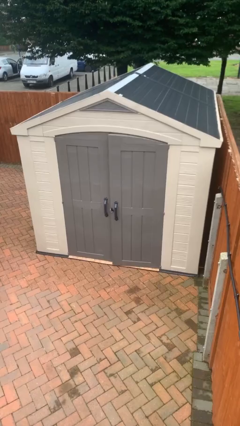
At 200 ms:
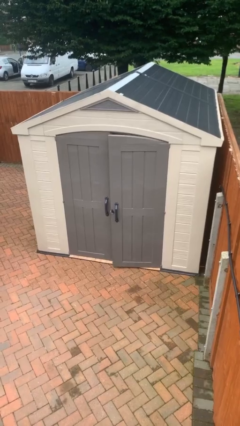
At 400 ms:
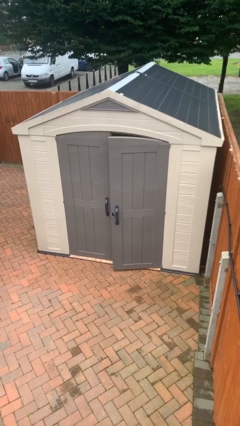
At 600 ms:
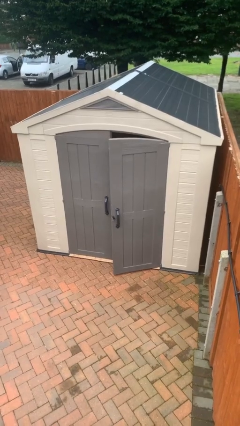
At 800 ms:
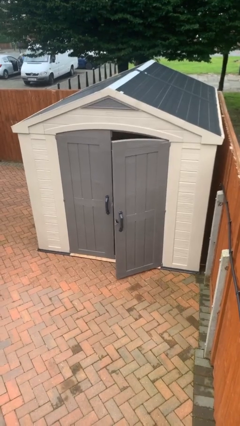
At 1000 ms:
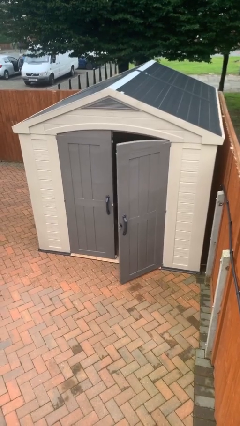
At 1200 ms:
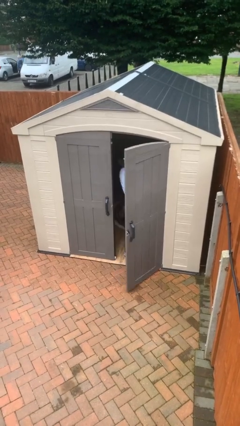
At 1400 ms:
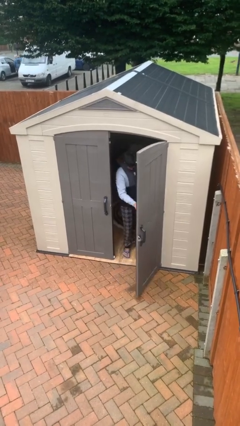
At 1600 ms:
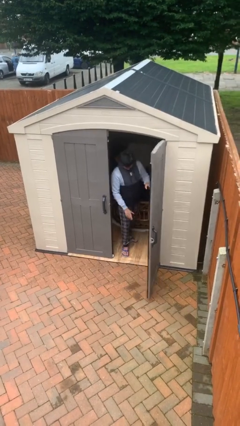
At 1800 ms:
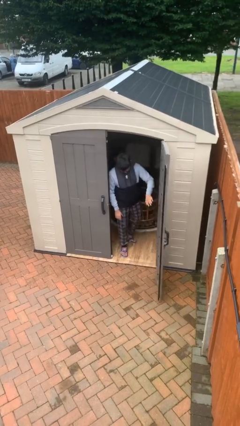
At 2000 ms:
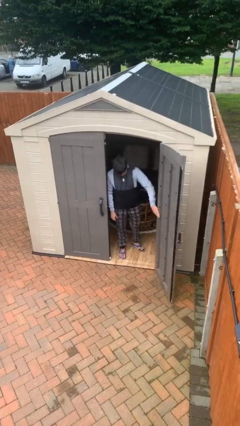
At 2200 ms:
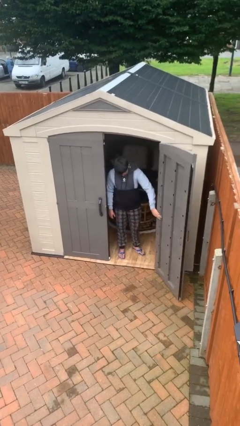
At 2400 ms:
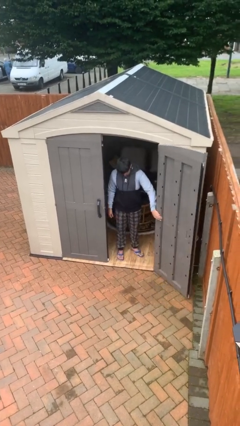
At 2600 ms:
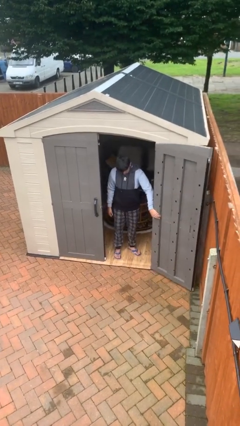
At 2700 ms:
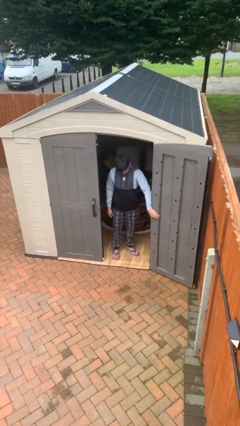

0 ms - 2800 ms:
person opens facility door

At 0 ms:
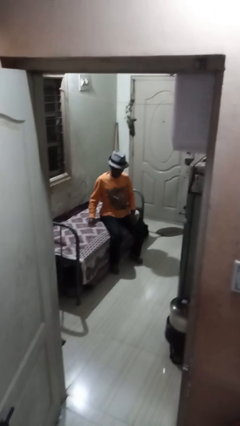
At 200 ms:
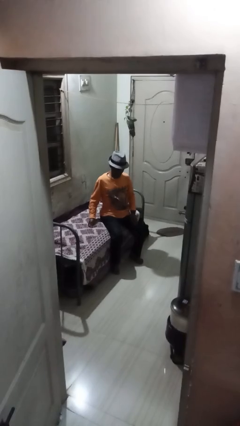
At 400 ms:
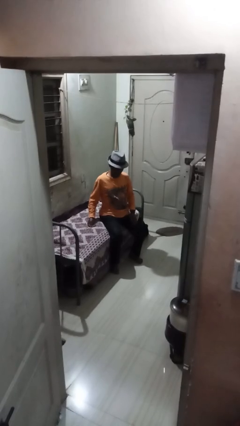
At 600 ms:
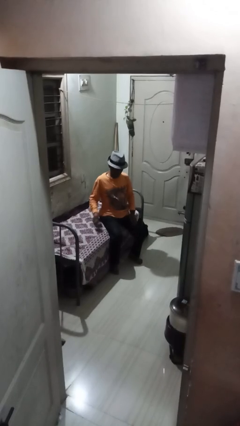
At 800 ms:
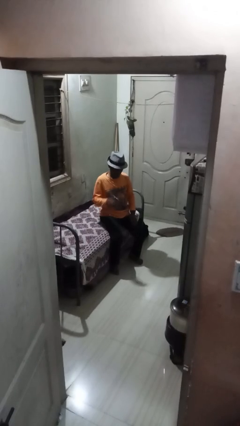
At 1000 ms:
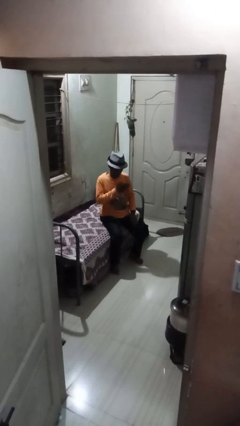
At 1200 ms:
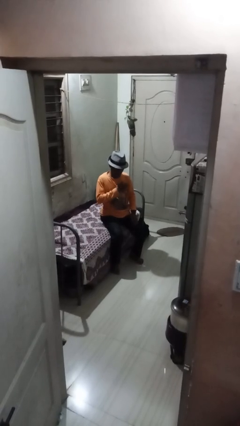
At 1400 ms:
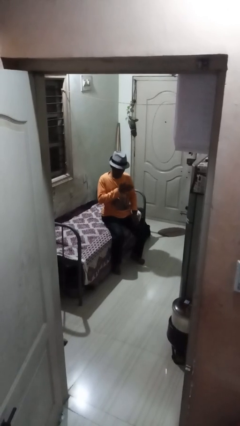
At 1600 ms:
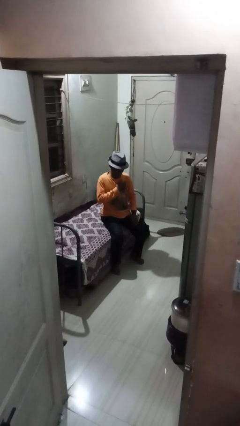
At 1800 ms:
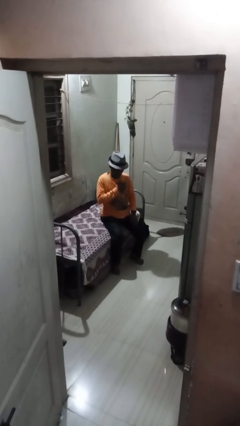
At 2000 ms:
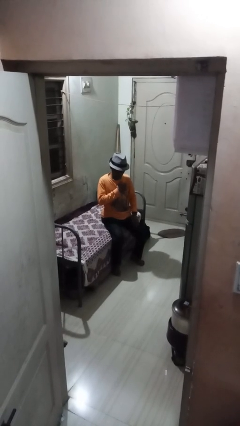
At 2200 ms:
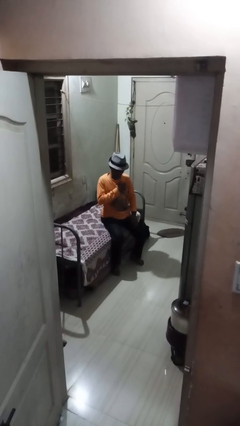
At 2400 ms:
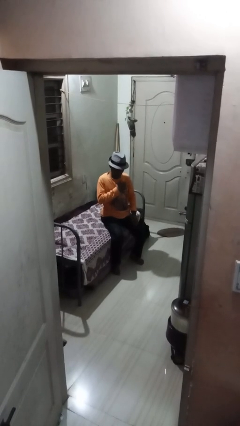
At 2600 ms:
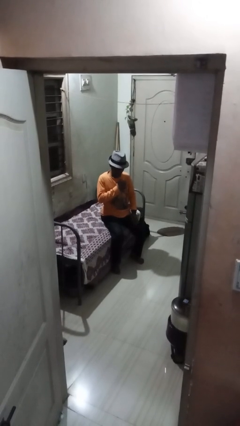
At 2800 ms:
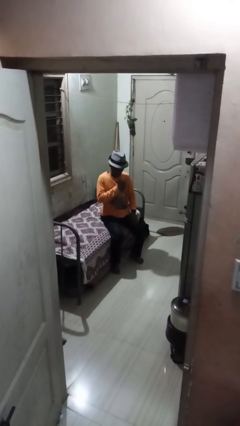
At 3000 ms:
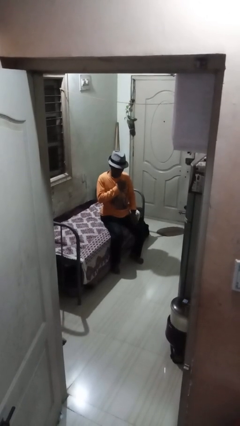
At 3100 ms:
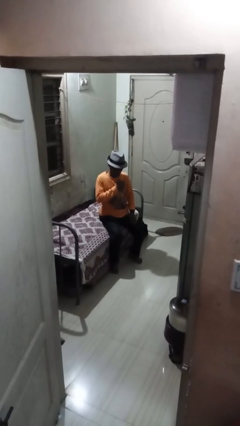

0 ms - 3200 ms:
person drums on chest

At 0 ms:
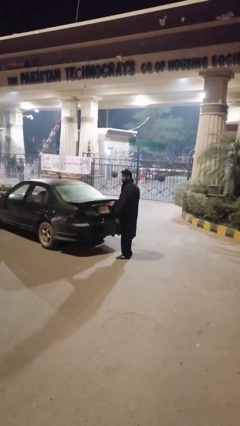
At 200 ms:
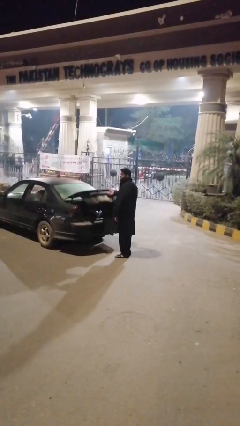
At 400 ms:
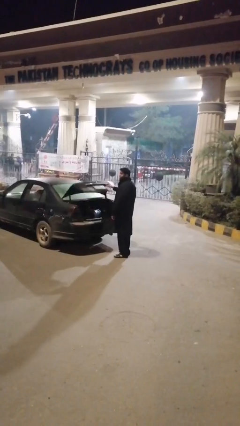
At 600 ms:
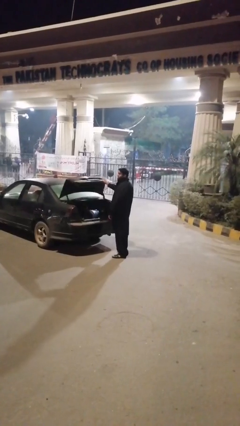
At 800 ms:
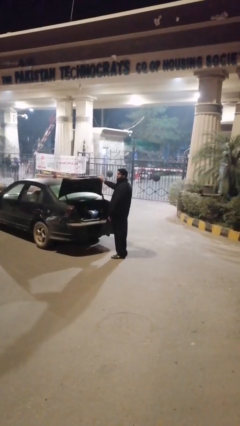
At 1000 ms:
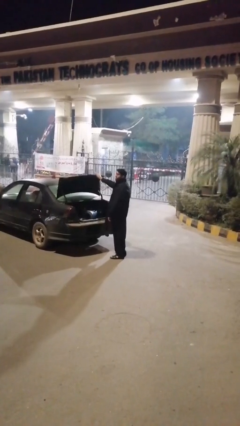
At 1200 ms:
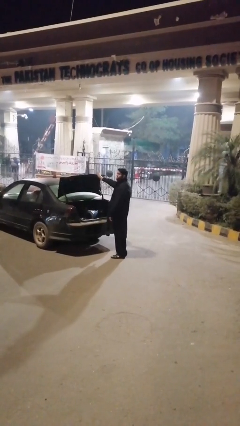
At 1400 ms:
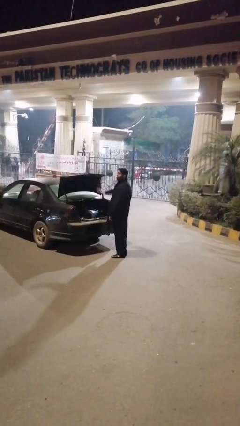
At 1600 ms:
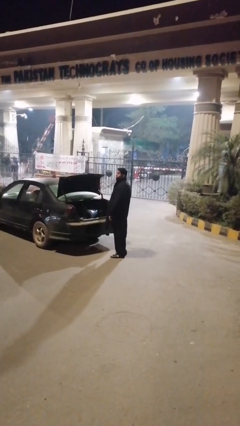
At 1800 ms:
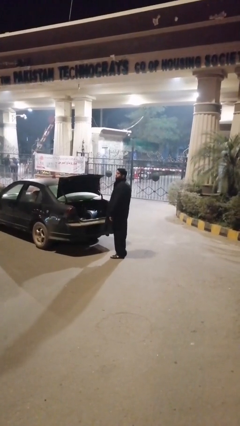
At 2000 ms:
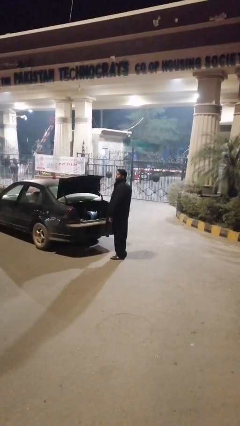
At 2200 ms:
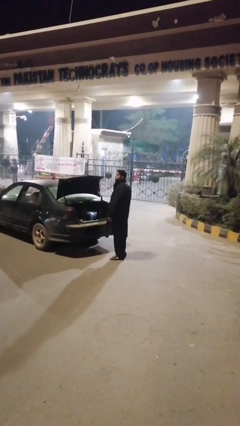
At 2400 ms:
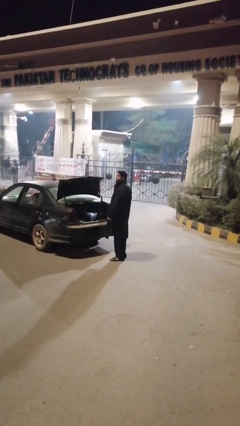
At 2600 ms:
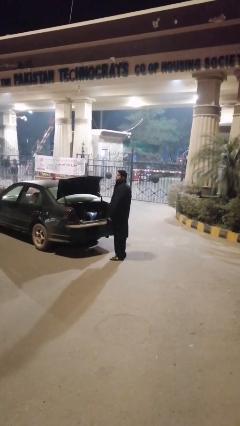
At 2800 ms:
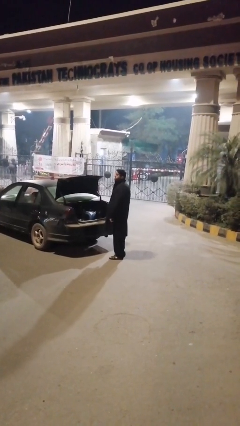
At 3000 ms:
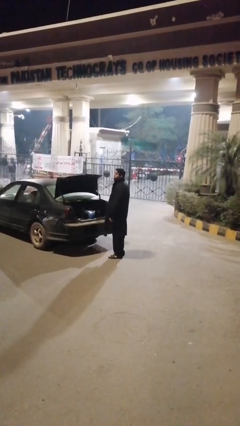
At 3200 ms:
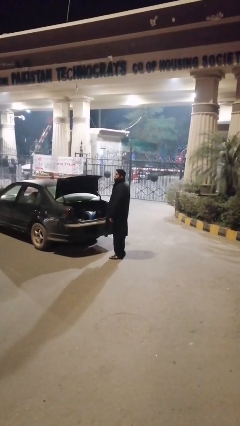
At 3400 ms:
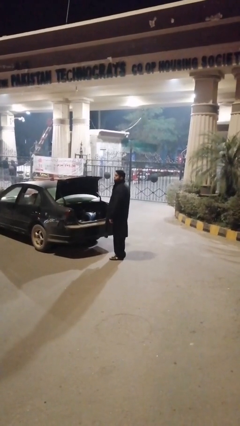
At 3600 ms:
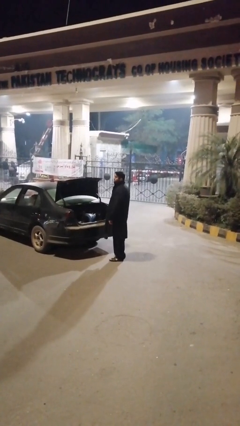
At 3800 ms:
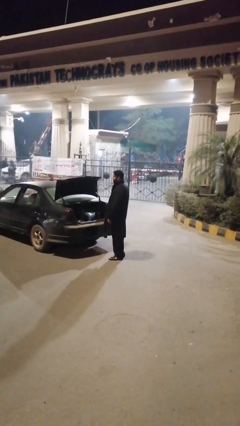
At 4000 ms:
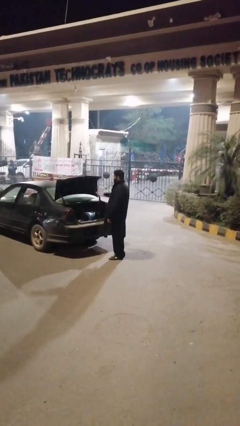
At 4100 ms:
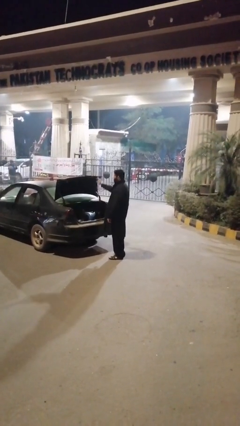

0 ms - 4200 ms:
person opens car trunk

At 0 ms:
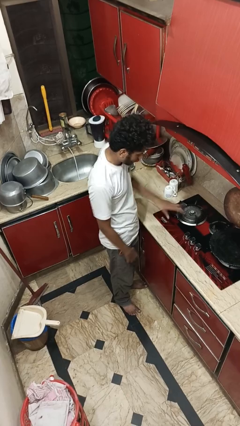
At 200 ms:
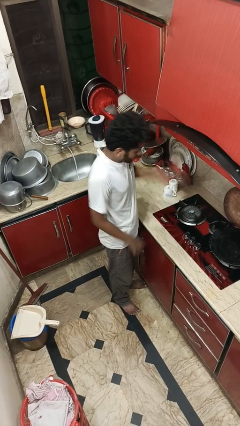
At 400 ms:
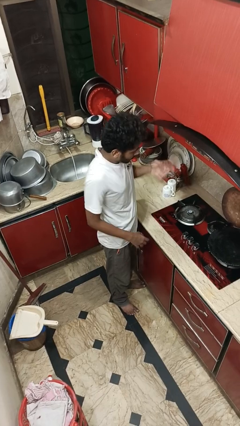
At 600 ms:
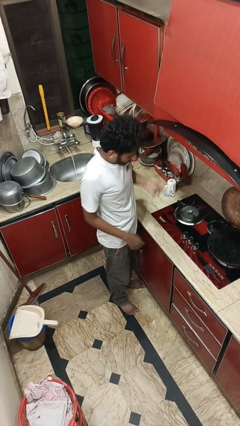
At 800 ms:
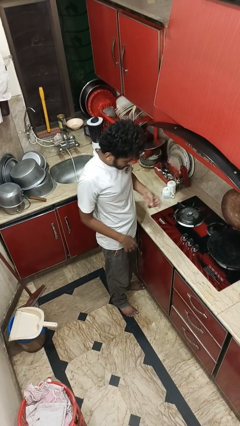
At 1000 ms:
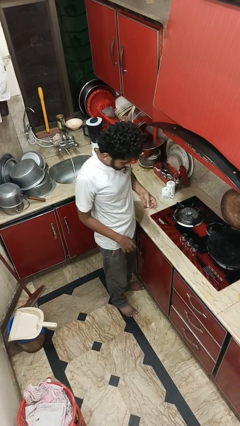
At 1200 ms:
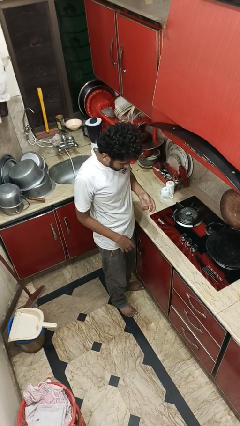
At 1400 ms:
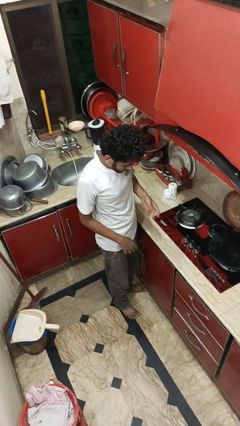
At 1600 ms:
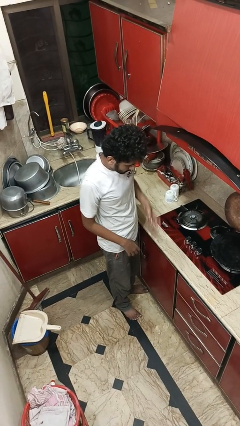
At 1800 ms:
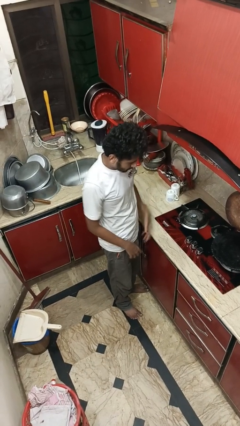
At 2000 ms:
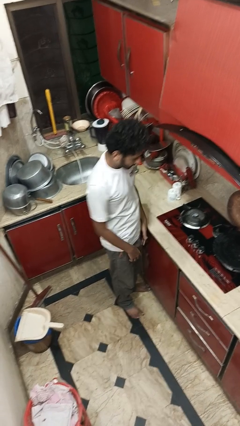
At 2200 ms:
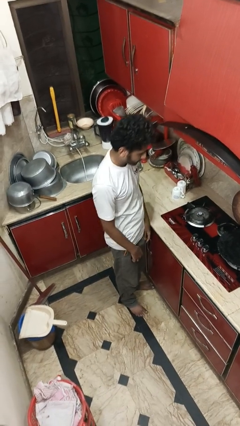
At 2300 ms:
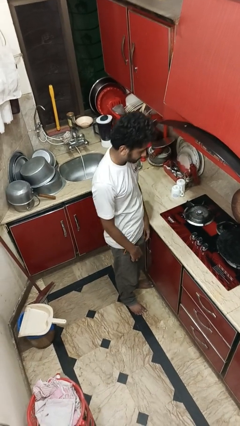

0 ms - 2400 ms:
person burns hand

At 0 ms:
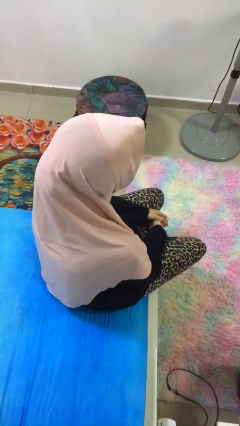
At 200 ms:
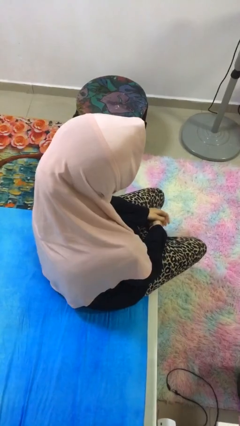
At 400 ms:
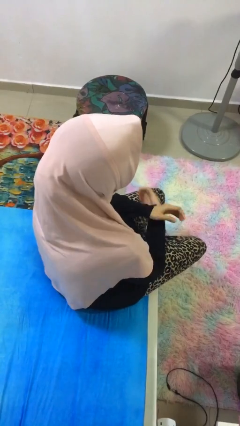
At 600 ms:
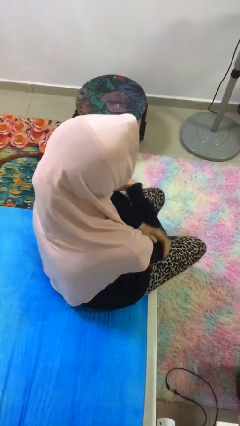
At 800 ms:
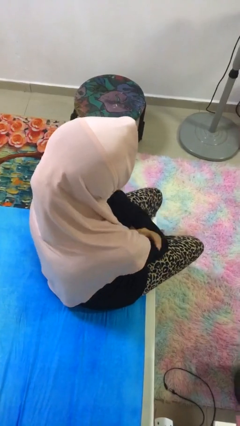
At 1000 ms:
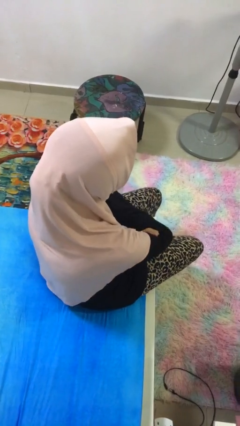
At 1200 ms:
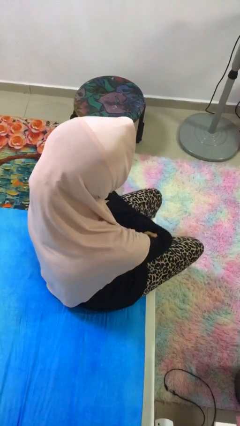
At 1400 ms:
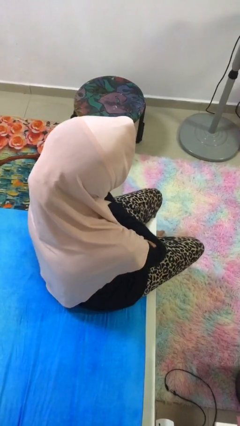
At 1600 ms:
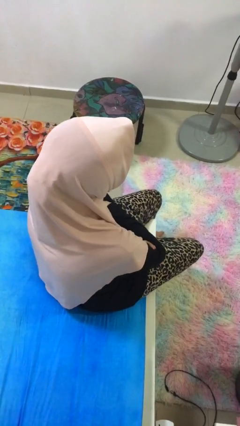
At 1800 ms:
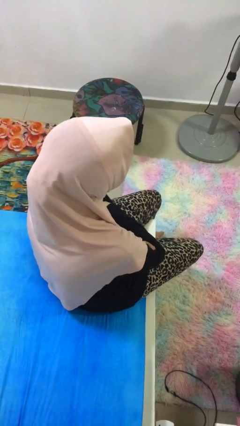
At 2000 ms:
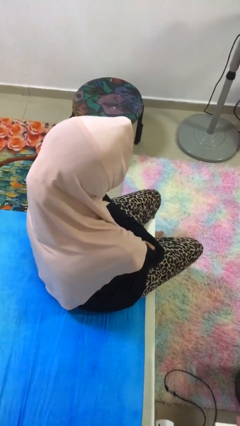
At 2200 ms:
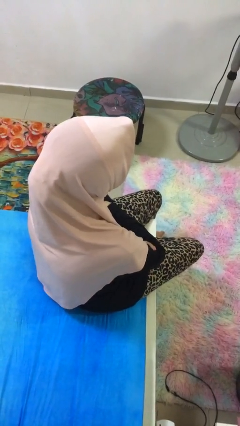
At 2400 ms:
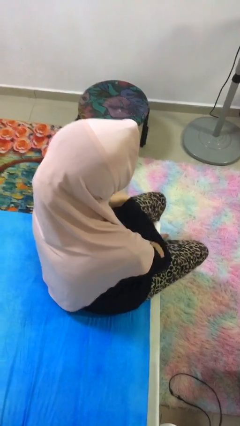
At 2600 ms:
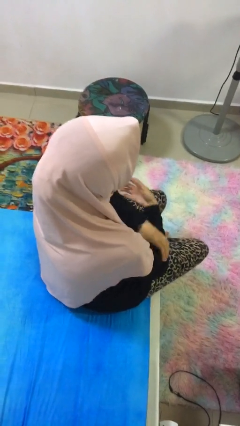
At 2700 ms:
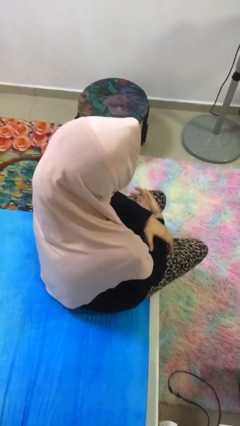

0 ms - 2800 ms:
person crosses arms

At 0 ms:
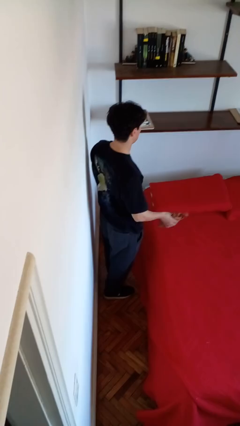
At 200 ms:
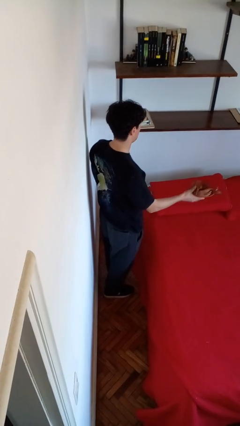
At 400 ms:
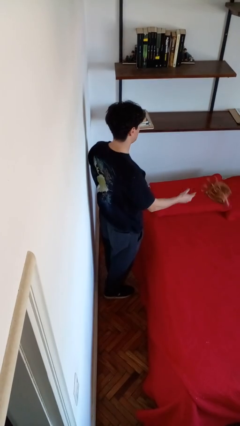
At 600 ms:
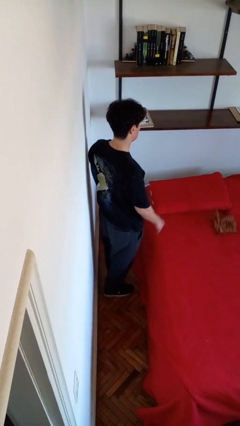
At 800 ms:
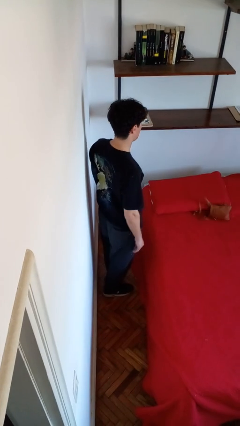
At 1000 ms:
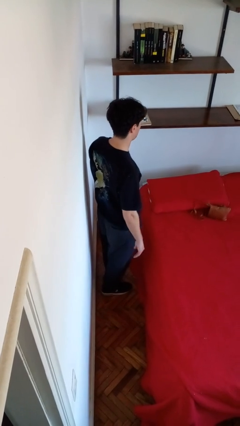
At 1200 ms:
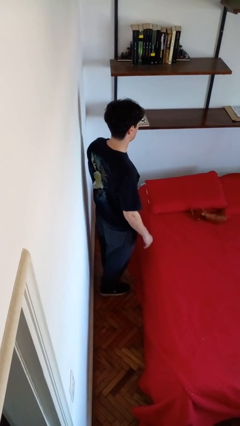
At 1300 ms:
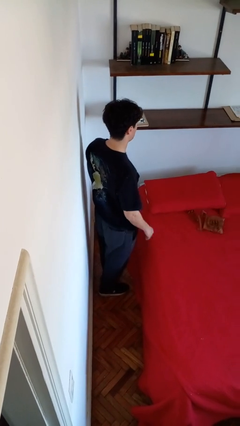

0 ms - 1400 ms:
person throws object on bed

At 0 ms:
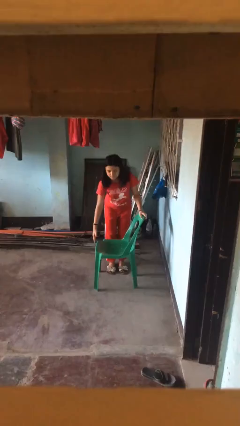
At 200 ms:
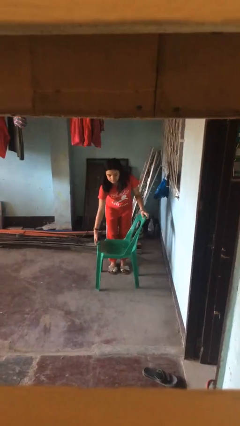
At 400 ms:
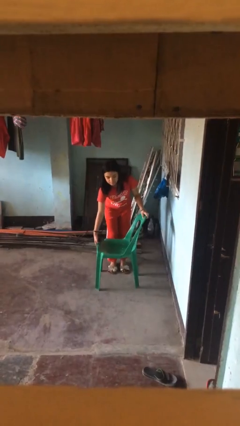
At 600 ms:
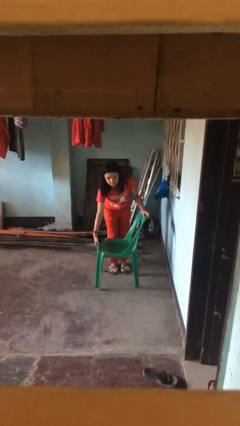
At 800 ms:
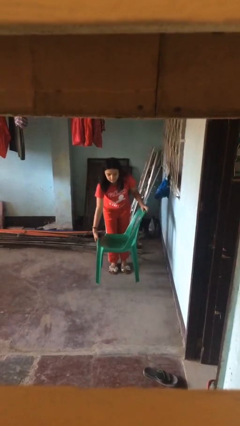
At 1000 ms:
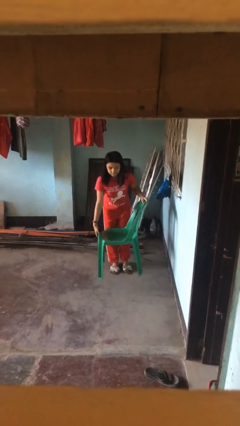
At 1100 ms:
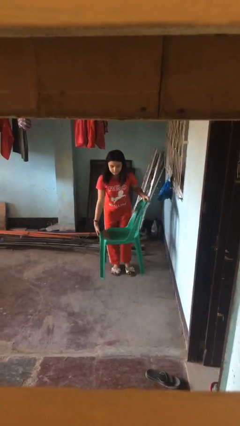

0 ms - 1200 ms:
person picks up object from floor
